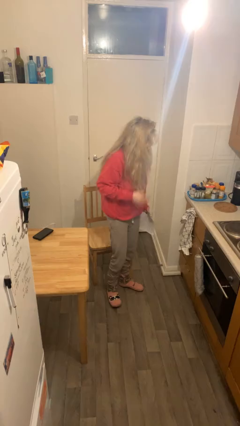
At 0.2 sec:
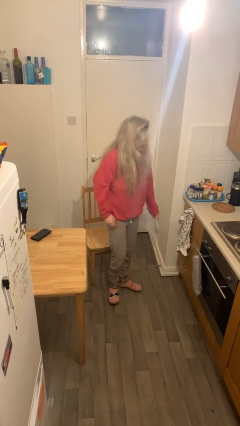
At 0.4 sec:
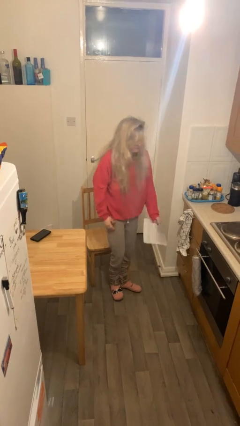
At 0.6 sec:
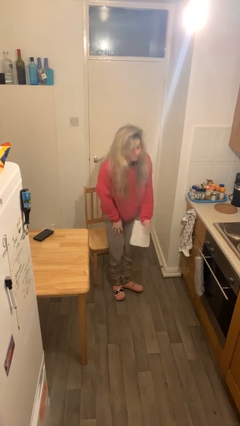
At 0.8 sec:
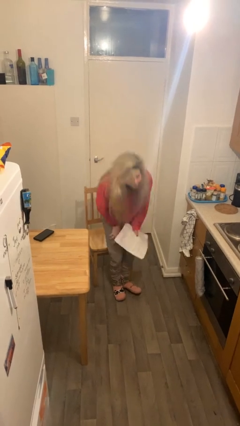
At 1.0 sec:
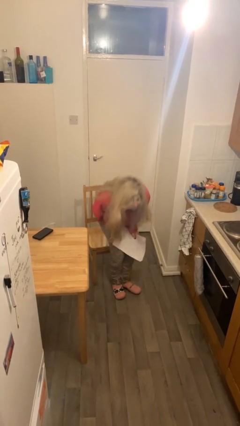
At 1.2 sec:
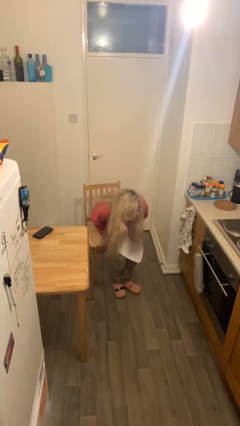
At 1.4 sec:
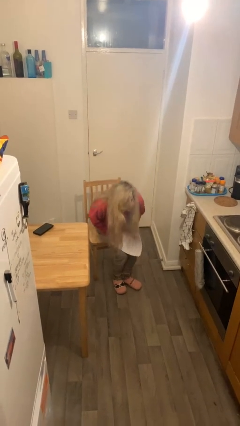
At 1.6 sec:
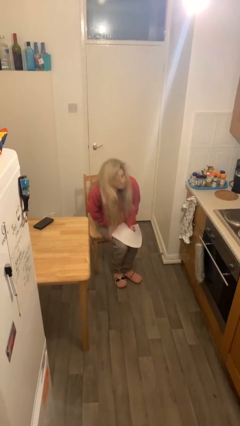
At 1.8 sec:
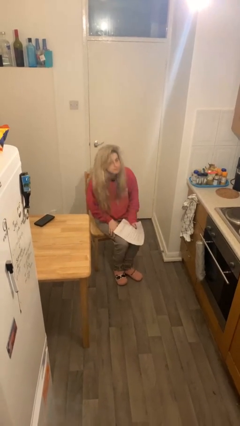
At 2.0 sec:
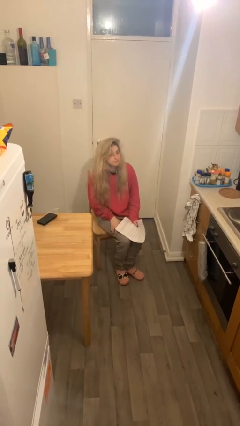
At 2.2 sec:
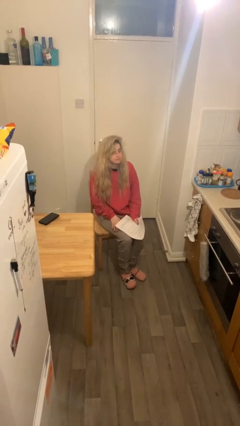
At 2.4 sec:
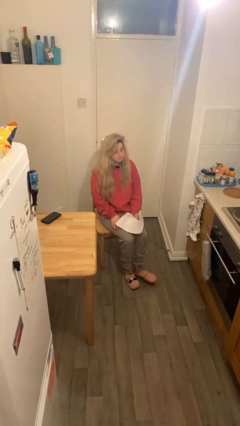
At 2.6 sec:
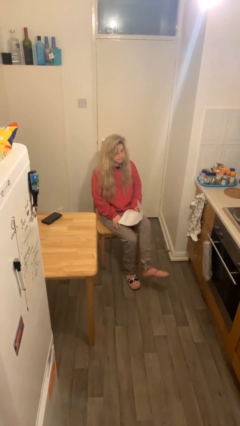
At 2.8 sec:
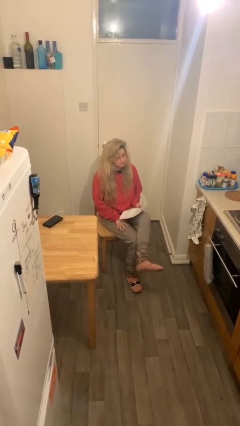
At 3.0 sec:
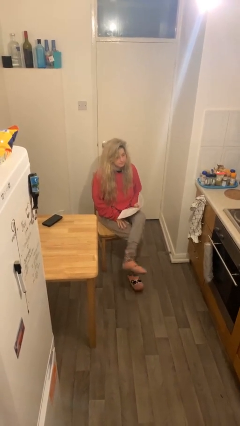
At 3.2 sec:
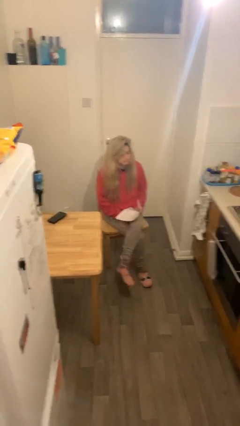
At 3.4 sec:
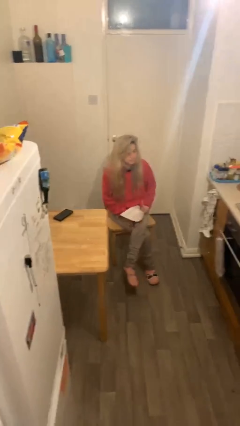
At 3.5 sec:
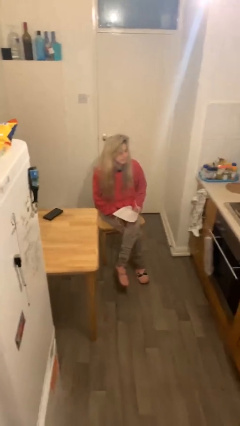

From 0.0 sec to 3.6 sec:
person sits down

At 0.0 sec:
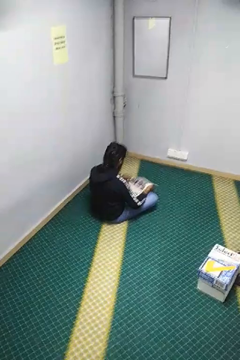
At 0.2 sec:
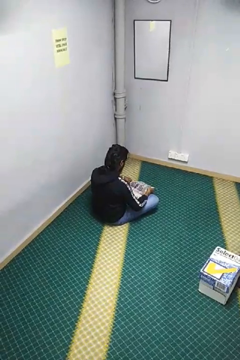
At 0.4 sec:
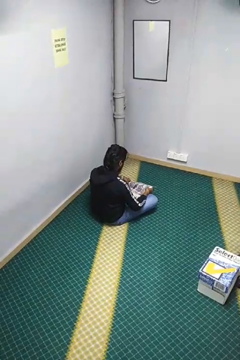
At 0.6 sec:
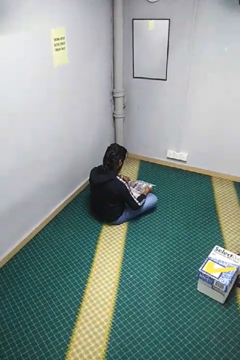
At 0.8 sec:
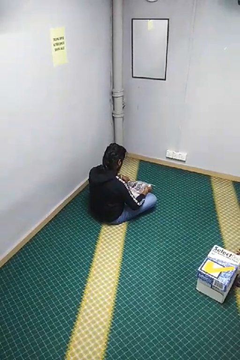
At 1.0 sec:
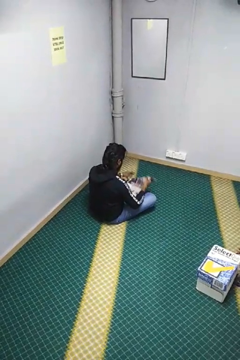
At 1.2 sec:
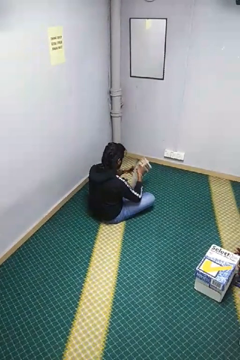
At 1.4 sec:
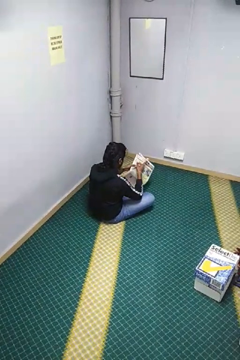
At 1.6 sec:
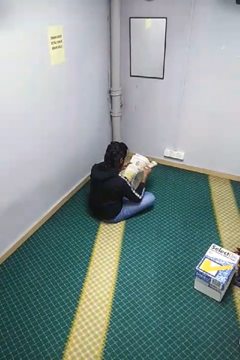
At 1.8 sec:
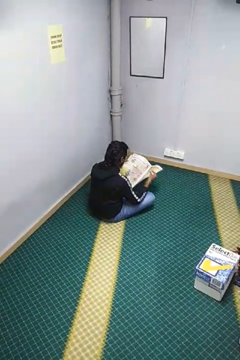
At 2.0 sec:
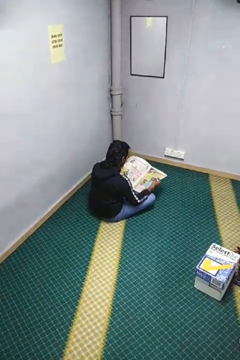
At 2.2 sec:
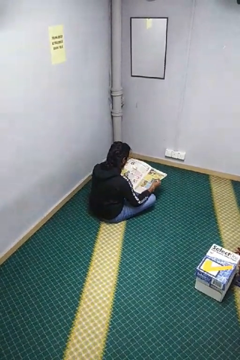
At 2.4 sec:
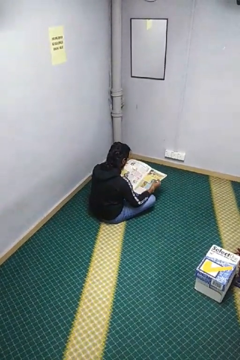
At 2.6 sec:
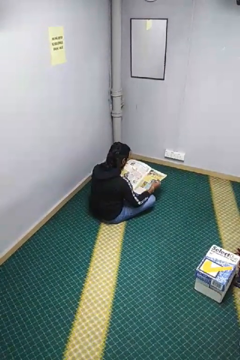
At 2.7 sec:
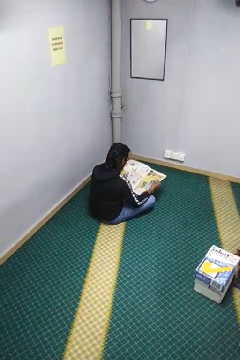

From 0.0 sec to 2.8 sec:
person reads newspaper

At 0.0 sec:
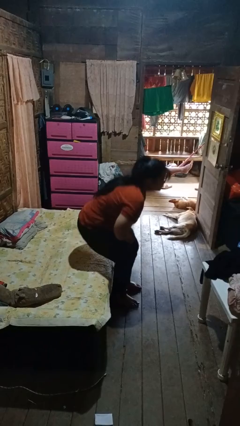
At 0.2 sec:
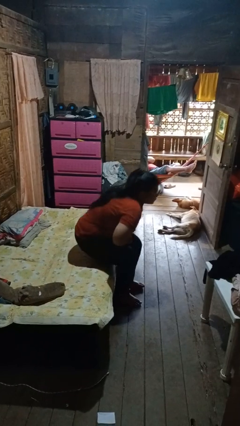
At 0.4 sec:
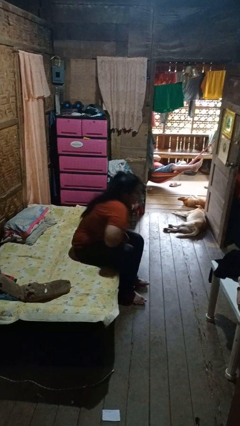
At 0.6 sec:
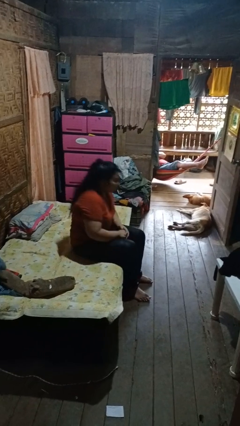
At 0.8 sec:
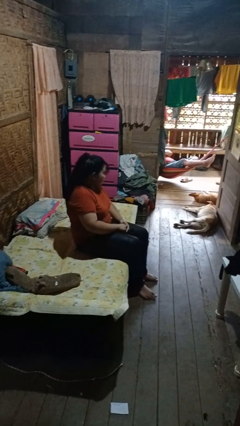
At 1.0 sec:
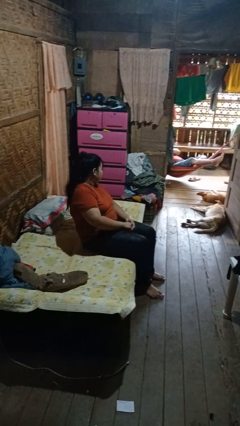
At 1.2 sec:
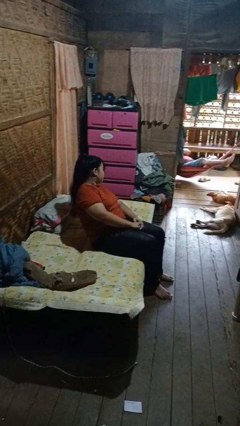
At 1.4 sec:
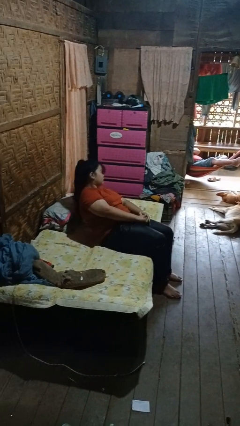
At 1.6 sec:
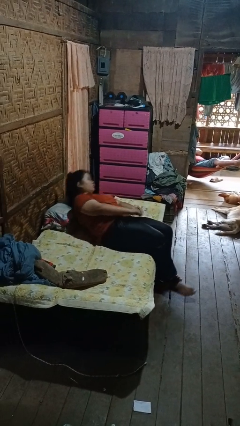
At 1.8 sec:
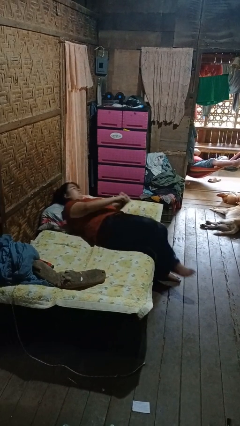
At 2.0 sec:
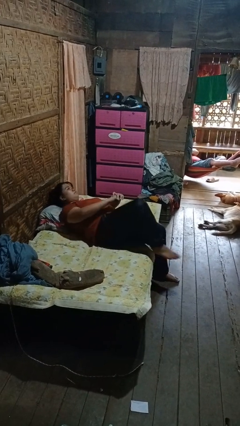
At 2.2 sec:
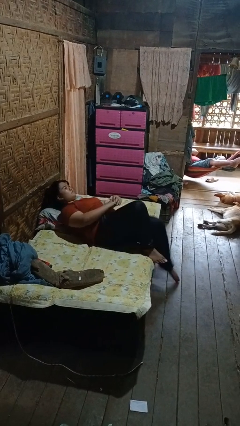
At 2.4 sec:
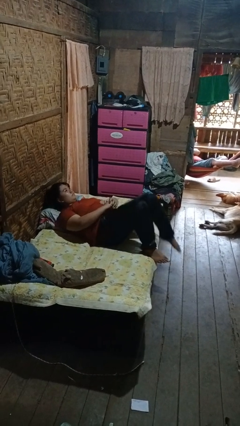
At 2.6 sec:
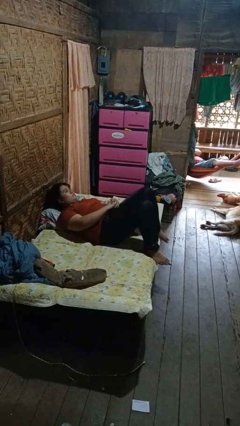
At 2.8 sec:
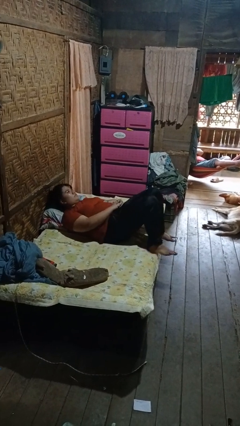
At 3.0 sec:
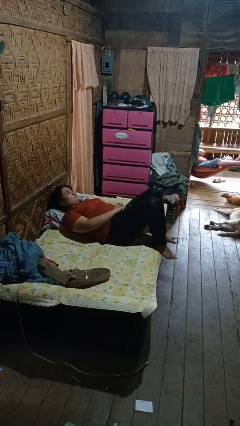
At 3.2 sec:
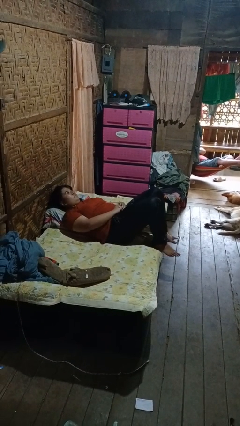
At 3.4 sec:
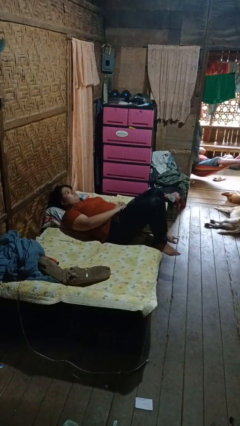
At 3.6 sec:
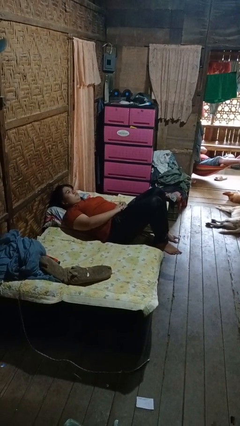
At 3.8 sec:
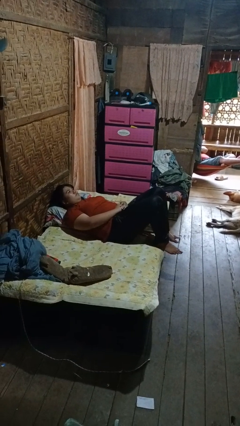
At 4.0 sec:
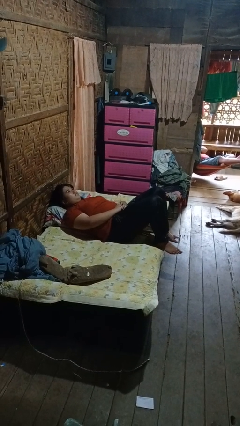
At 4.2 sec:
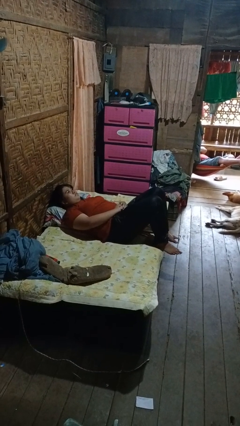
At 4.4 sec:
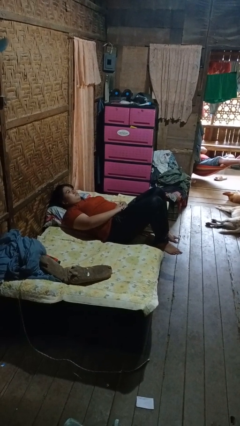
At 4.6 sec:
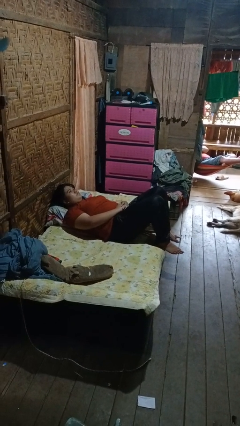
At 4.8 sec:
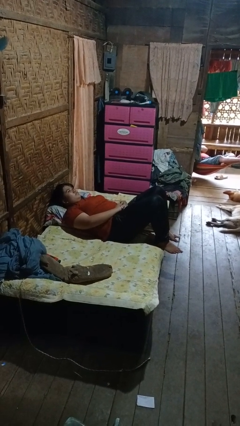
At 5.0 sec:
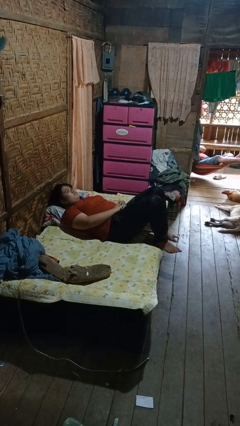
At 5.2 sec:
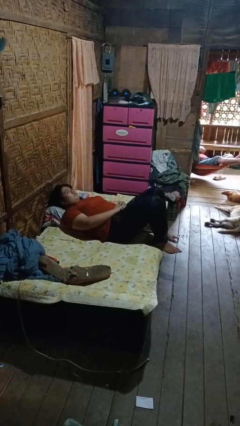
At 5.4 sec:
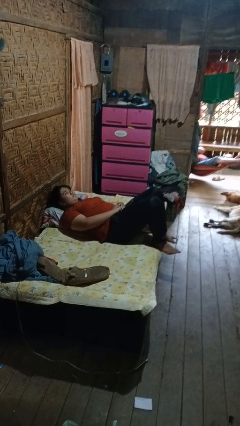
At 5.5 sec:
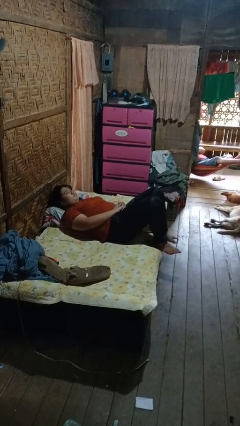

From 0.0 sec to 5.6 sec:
person lies down on bed

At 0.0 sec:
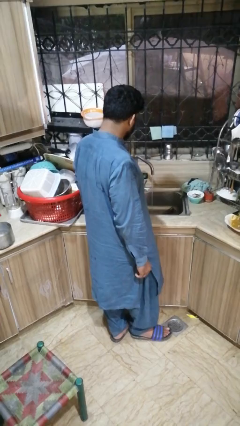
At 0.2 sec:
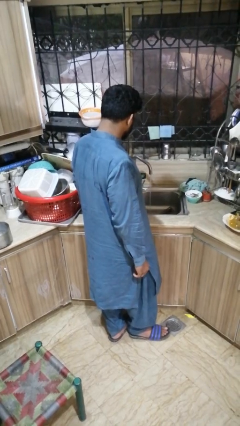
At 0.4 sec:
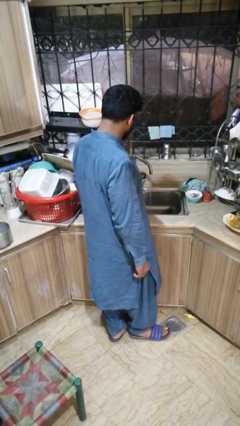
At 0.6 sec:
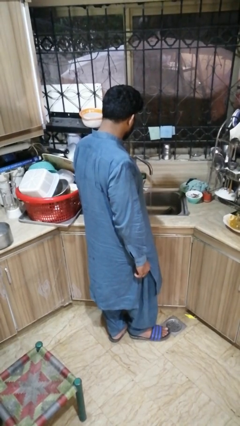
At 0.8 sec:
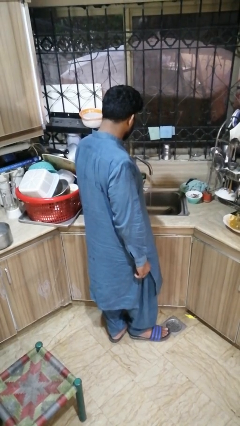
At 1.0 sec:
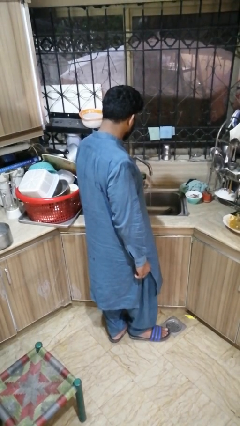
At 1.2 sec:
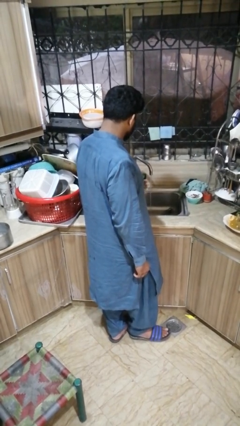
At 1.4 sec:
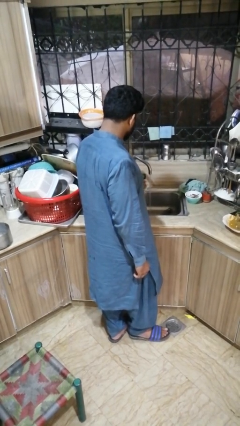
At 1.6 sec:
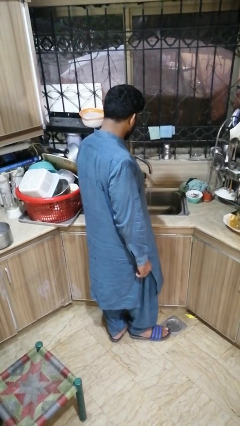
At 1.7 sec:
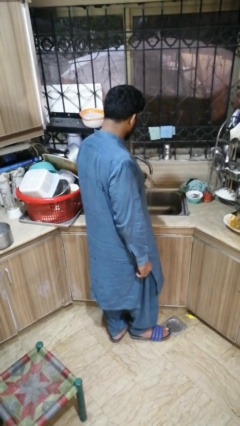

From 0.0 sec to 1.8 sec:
person turns off faucet

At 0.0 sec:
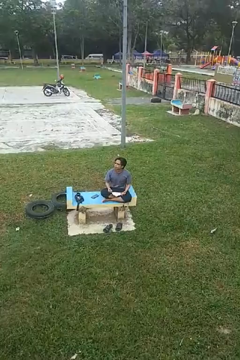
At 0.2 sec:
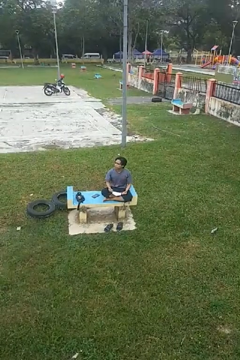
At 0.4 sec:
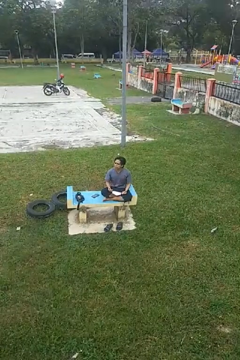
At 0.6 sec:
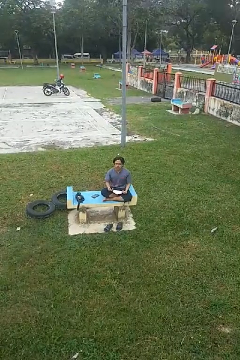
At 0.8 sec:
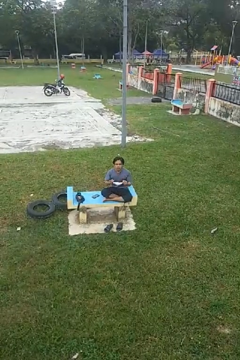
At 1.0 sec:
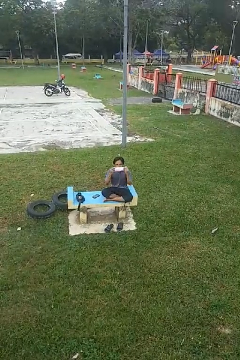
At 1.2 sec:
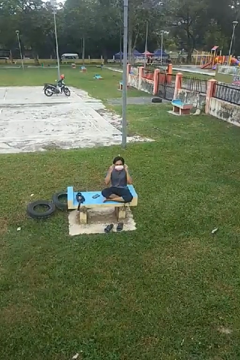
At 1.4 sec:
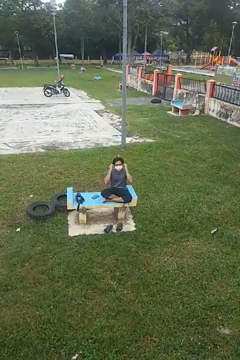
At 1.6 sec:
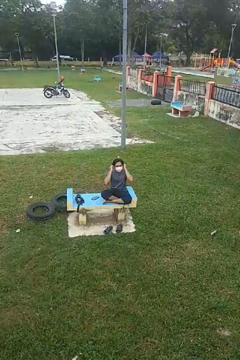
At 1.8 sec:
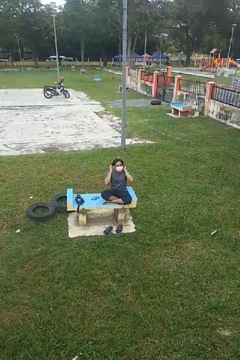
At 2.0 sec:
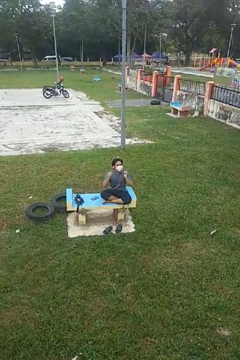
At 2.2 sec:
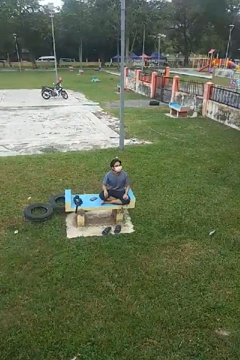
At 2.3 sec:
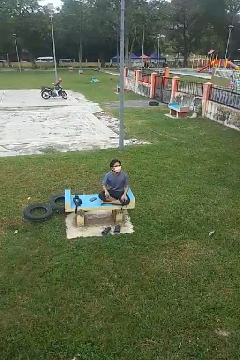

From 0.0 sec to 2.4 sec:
person puts on facemask

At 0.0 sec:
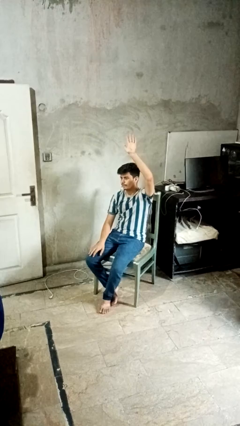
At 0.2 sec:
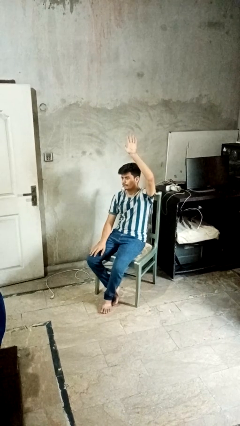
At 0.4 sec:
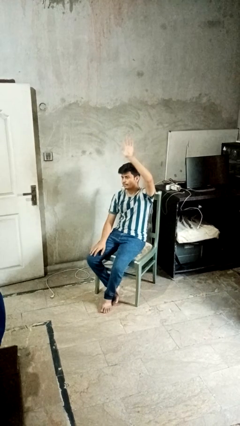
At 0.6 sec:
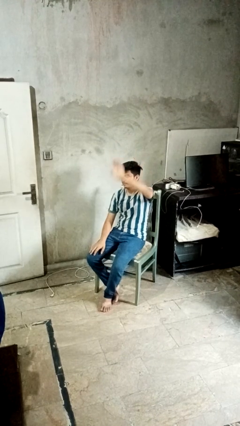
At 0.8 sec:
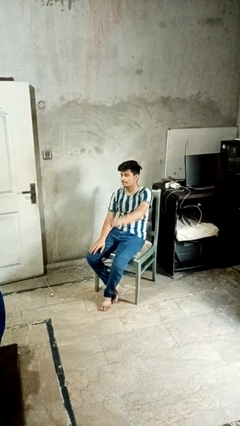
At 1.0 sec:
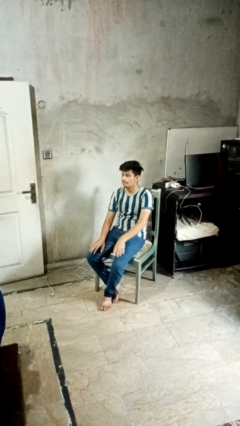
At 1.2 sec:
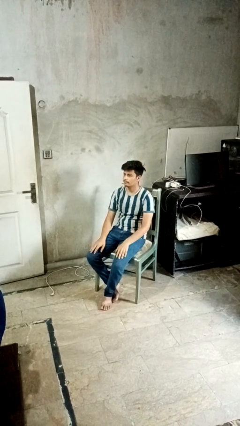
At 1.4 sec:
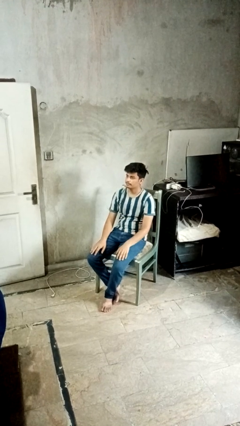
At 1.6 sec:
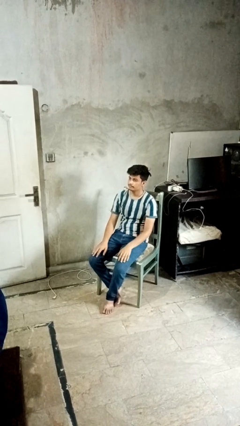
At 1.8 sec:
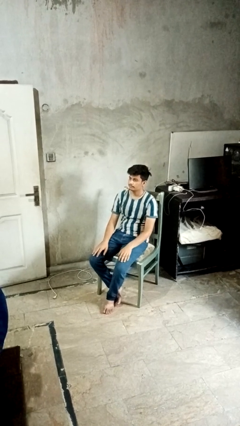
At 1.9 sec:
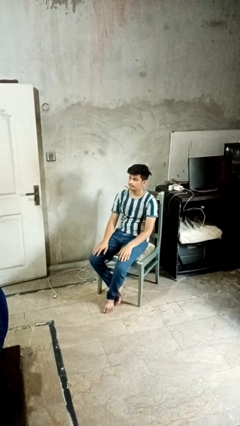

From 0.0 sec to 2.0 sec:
person gestures lower hand
